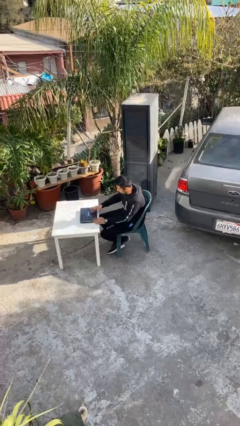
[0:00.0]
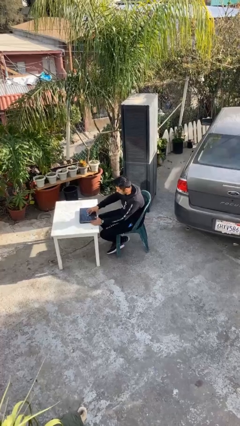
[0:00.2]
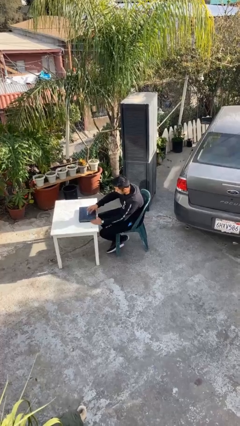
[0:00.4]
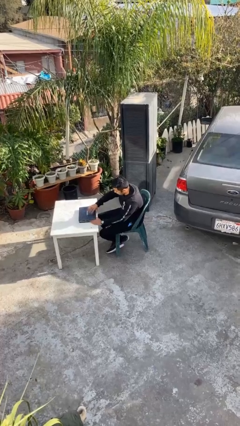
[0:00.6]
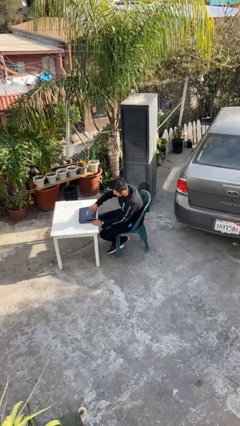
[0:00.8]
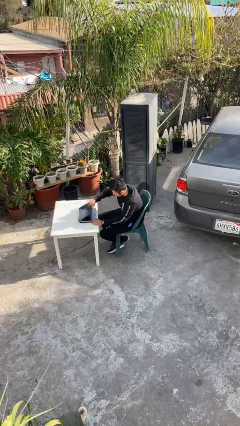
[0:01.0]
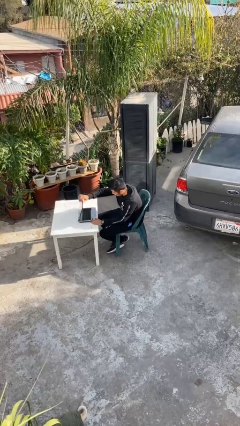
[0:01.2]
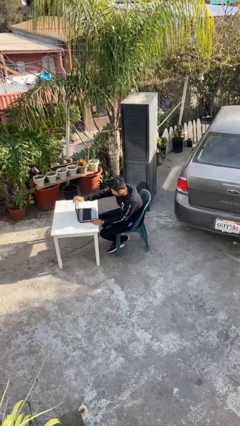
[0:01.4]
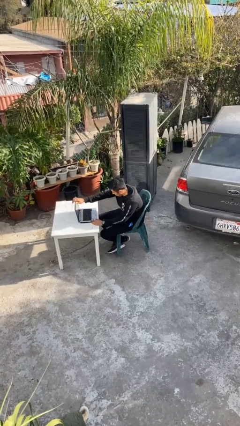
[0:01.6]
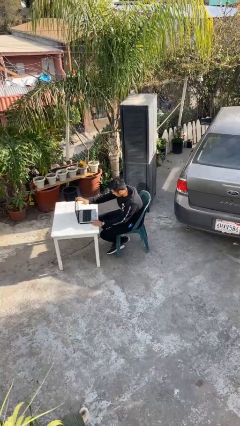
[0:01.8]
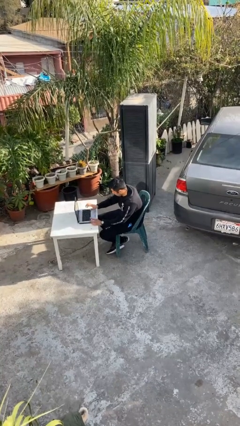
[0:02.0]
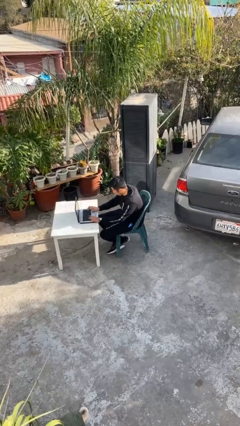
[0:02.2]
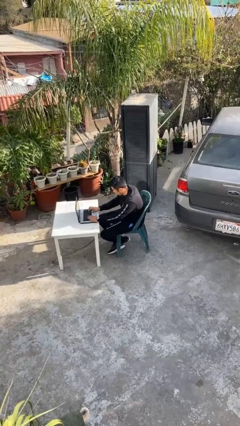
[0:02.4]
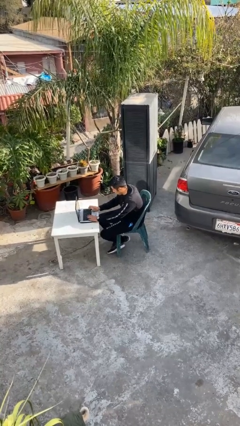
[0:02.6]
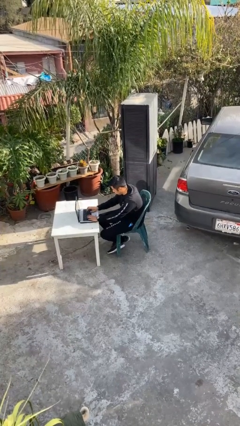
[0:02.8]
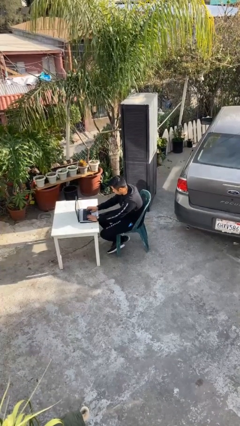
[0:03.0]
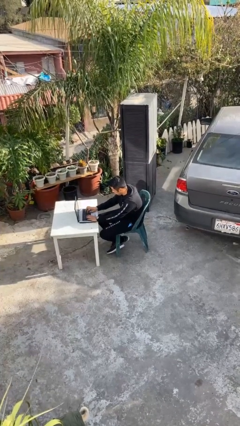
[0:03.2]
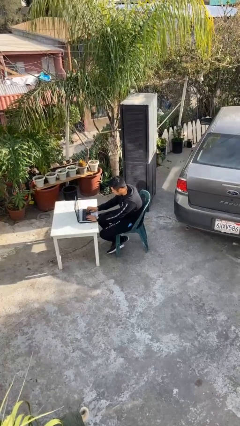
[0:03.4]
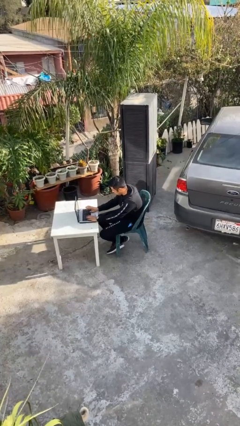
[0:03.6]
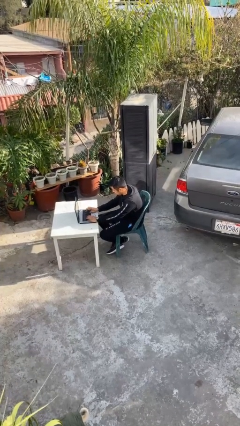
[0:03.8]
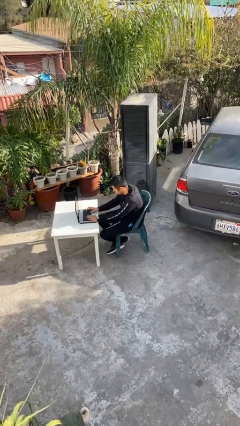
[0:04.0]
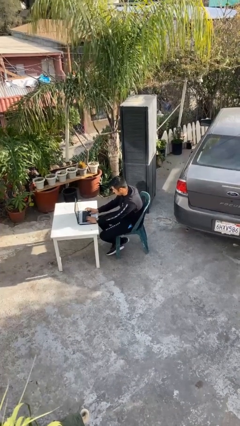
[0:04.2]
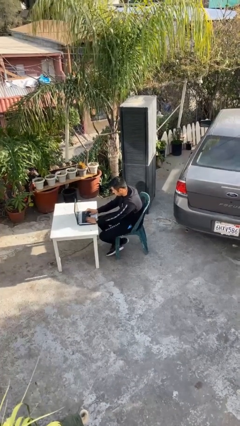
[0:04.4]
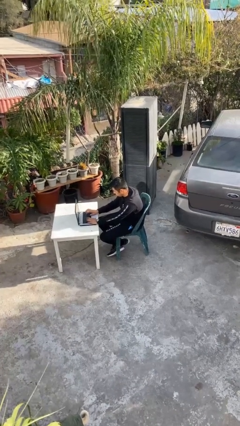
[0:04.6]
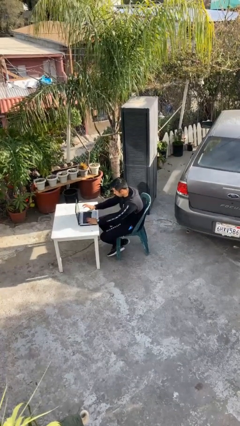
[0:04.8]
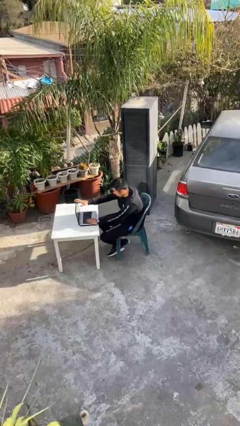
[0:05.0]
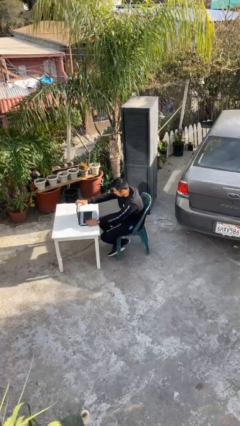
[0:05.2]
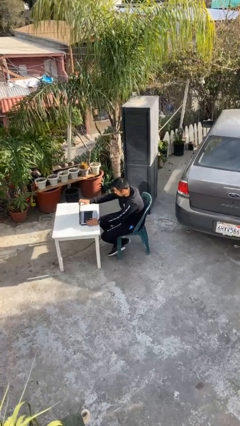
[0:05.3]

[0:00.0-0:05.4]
person interacts with laptop

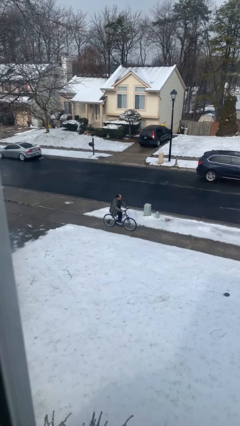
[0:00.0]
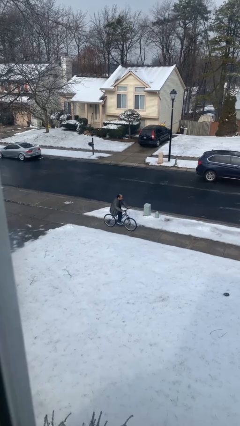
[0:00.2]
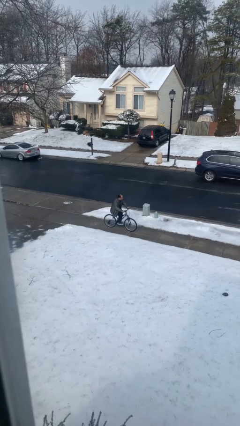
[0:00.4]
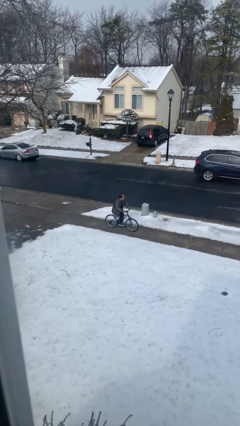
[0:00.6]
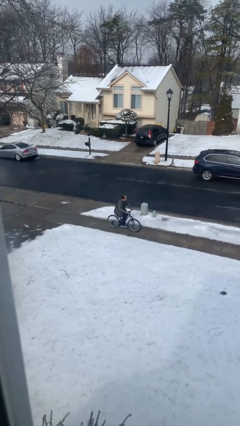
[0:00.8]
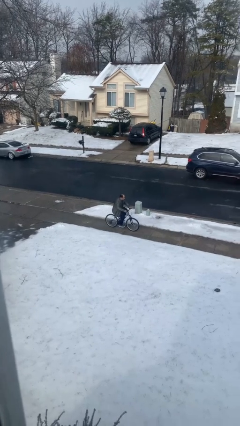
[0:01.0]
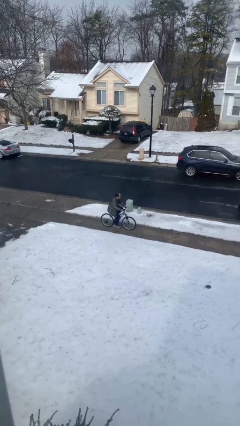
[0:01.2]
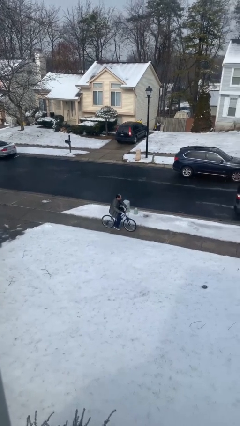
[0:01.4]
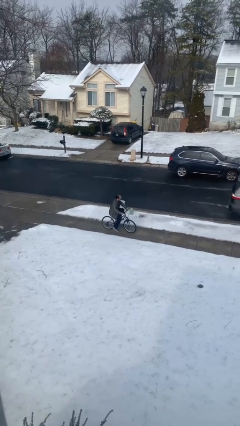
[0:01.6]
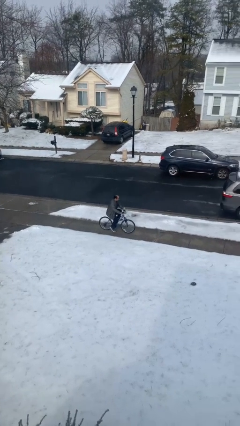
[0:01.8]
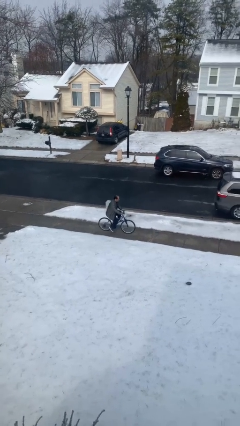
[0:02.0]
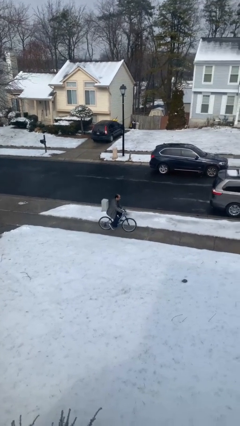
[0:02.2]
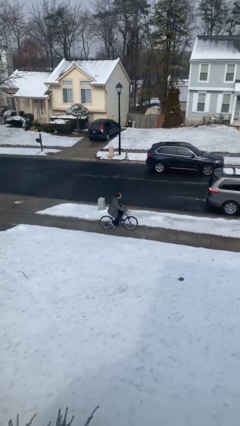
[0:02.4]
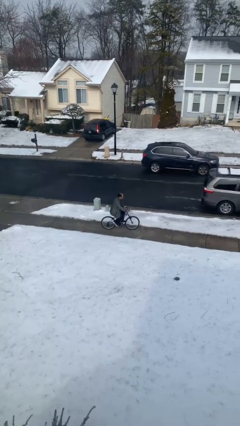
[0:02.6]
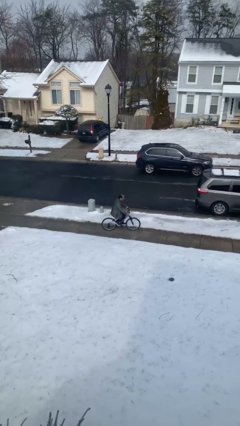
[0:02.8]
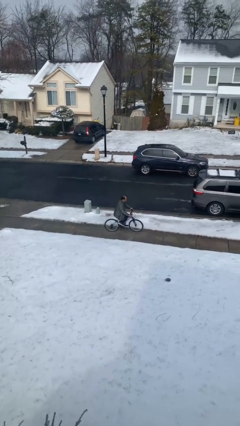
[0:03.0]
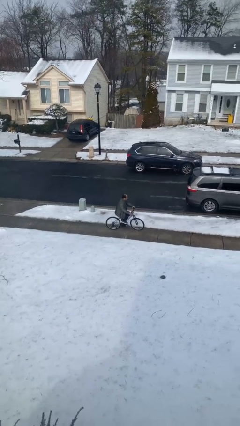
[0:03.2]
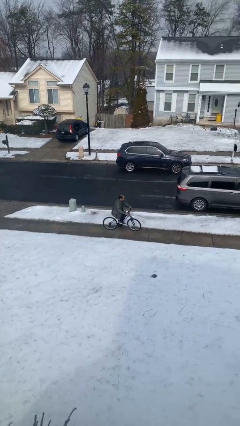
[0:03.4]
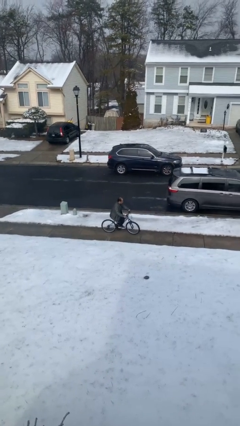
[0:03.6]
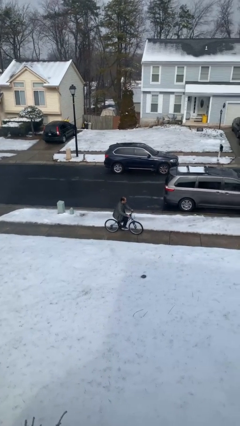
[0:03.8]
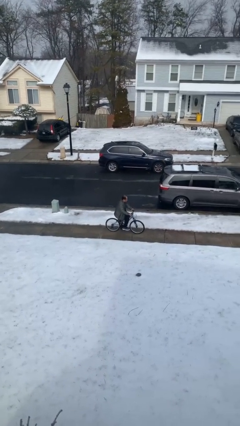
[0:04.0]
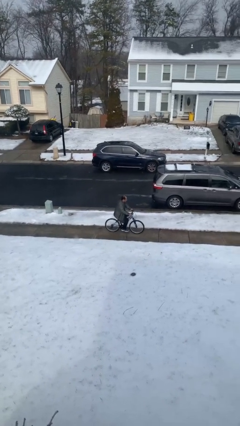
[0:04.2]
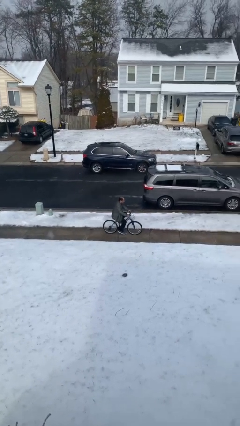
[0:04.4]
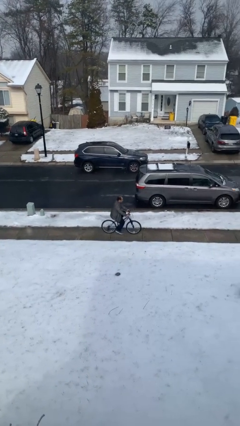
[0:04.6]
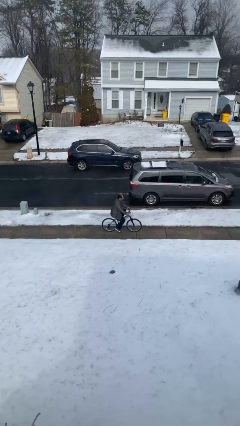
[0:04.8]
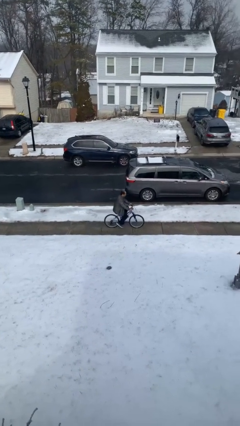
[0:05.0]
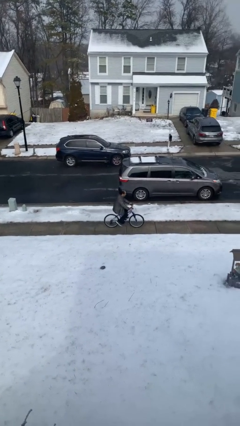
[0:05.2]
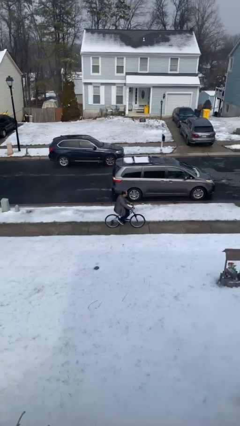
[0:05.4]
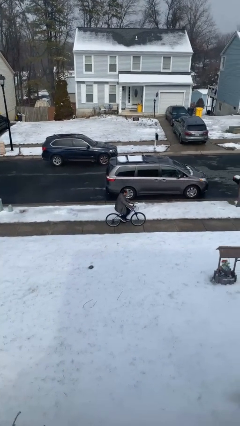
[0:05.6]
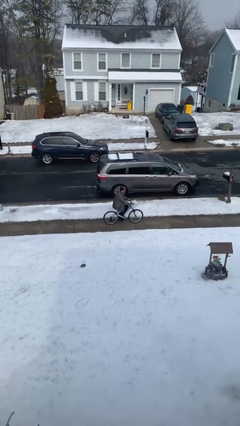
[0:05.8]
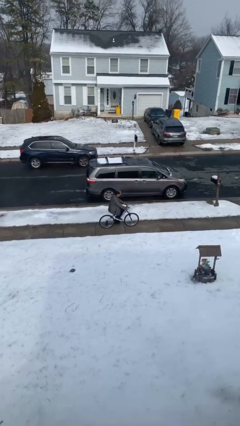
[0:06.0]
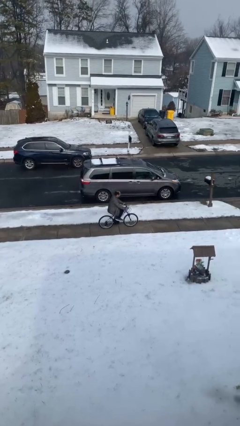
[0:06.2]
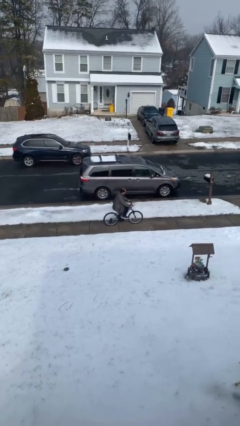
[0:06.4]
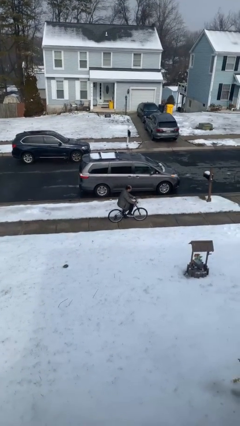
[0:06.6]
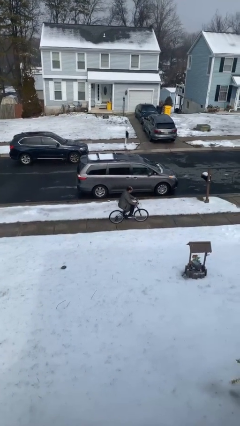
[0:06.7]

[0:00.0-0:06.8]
person rides bicycle

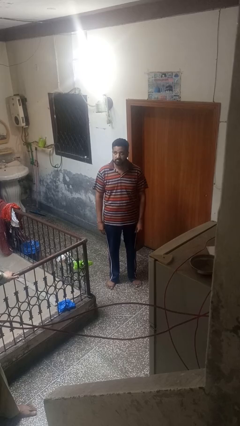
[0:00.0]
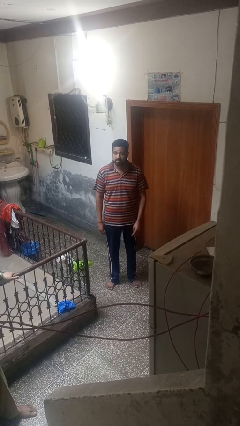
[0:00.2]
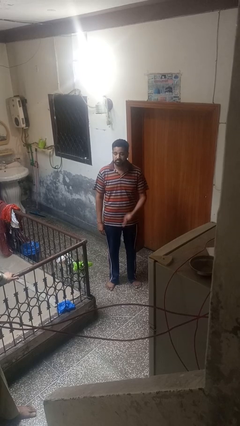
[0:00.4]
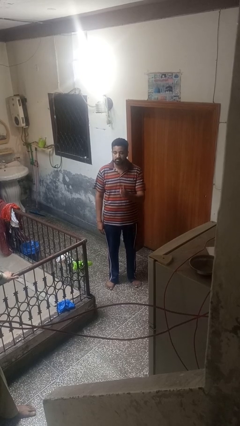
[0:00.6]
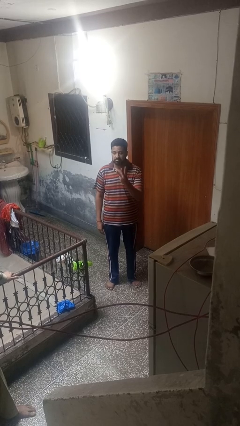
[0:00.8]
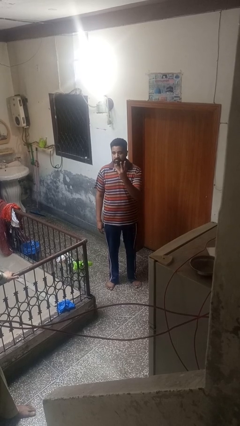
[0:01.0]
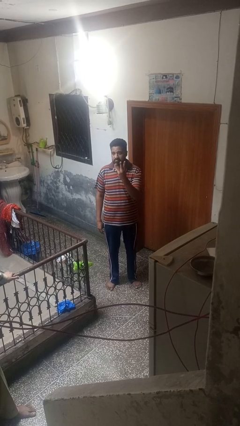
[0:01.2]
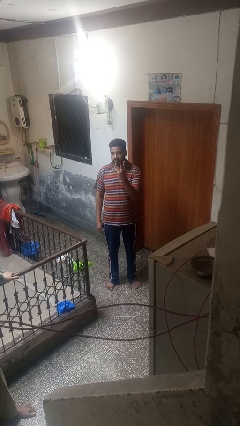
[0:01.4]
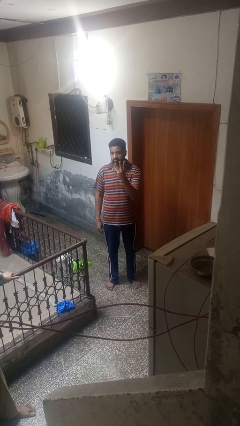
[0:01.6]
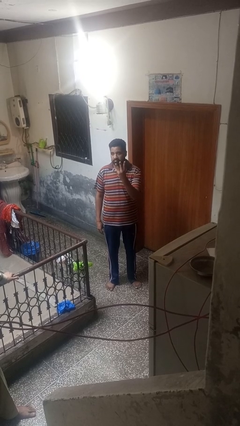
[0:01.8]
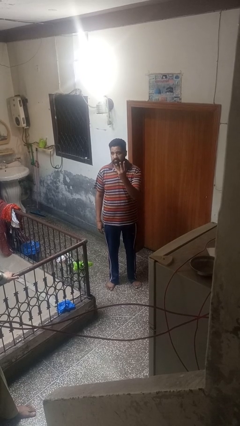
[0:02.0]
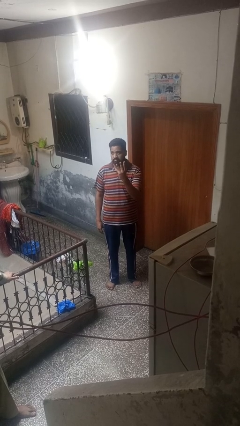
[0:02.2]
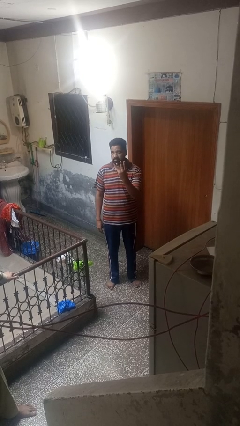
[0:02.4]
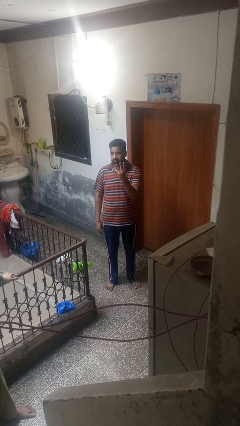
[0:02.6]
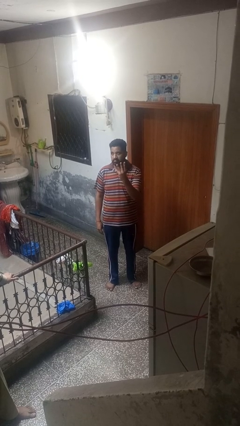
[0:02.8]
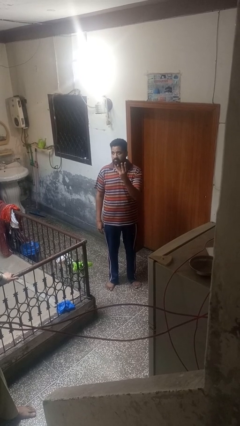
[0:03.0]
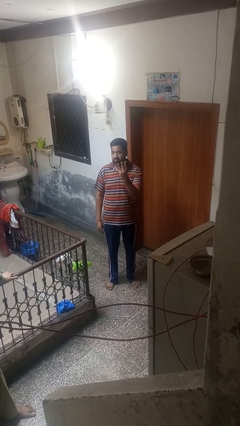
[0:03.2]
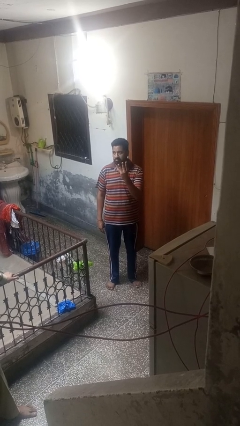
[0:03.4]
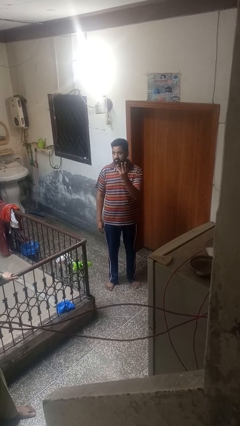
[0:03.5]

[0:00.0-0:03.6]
person gestures number three

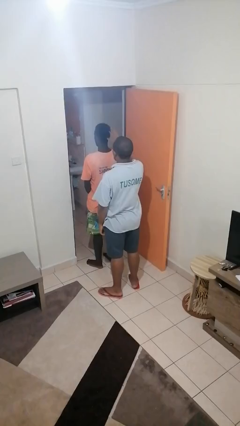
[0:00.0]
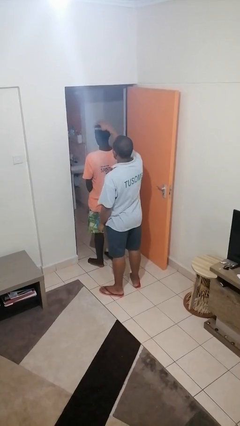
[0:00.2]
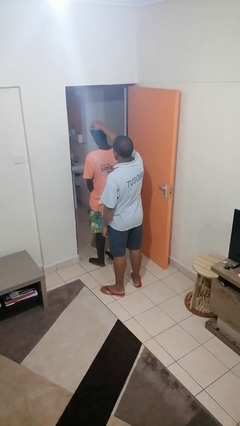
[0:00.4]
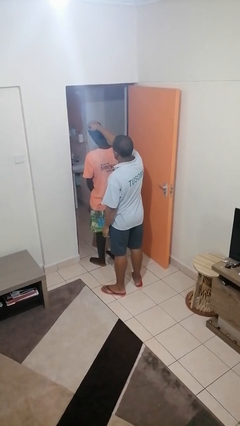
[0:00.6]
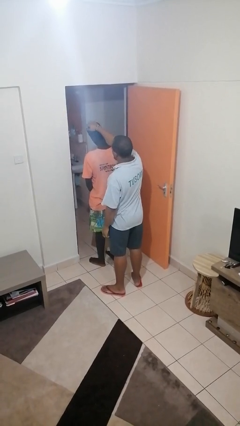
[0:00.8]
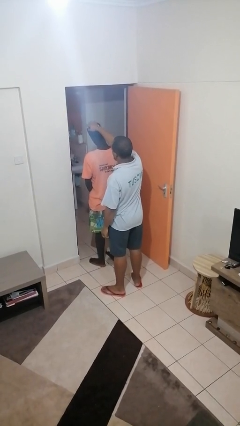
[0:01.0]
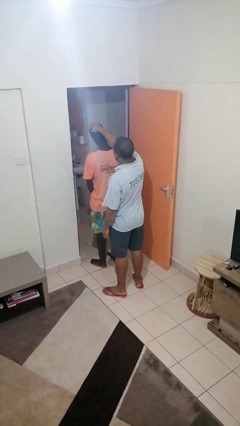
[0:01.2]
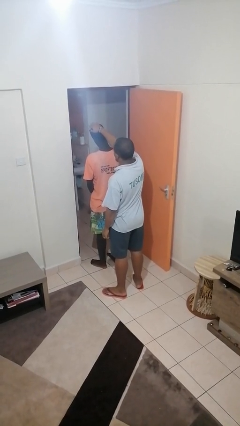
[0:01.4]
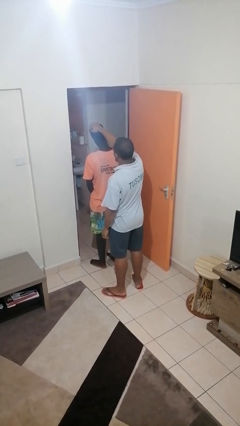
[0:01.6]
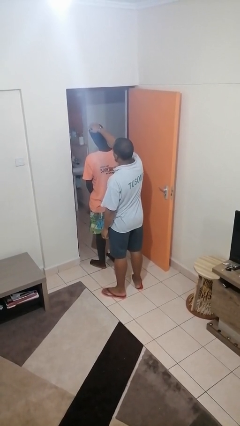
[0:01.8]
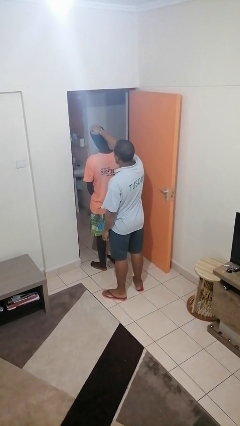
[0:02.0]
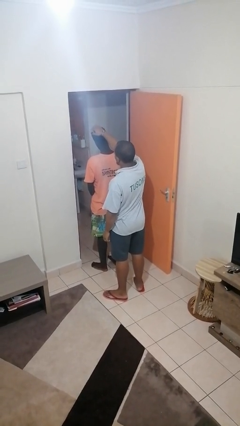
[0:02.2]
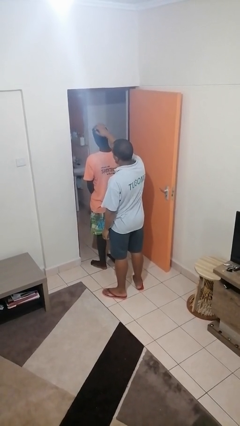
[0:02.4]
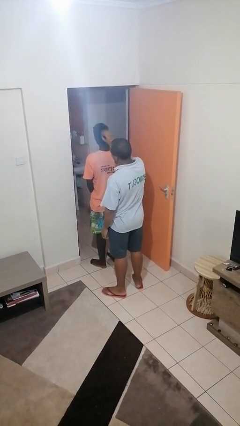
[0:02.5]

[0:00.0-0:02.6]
person grabs person by hair
